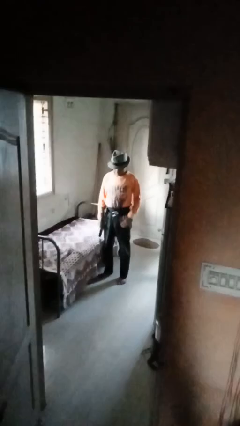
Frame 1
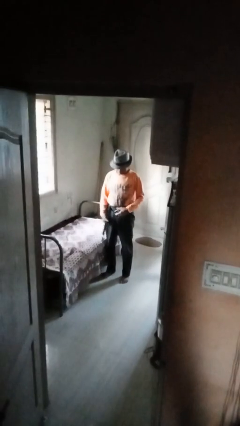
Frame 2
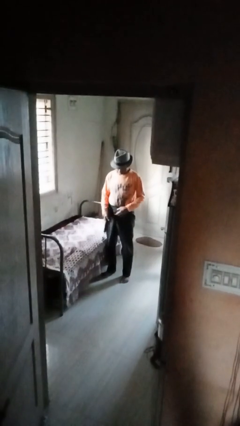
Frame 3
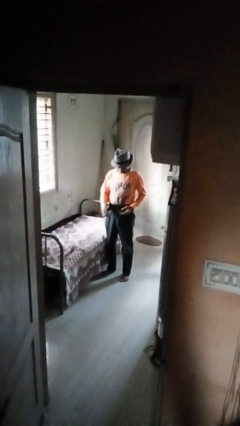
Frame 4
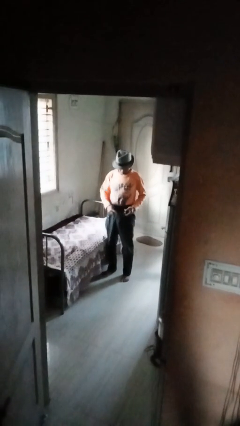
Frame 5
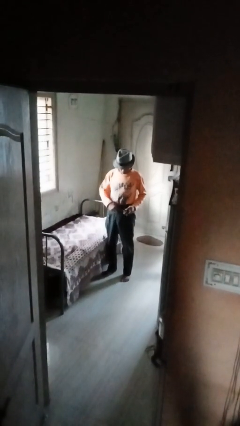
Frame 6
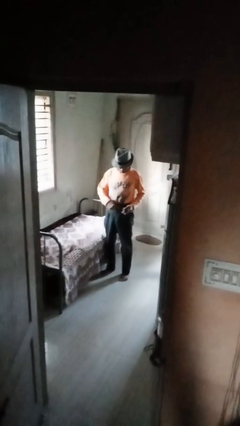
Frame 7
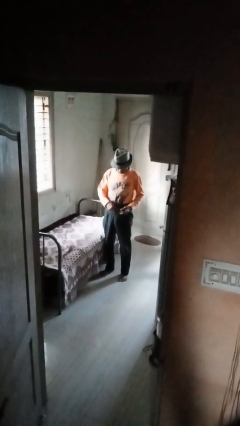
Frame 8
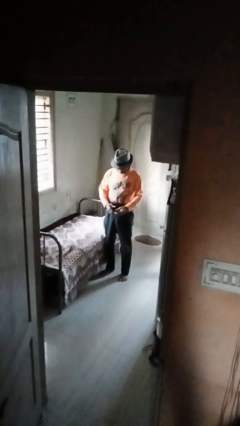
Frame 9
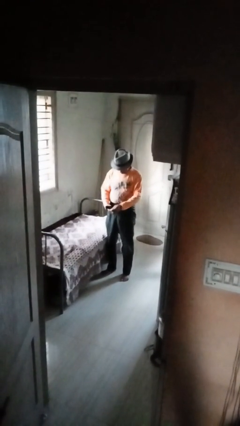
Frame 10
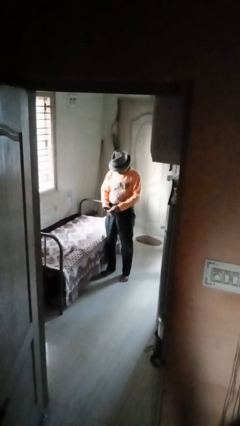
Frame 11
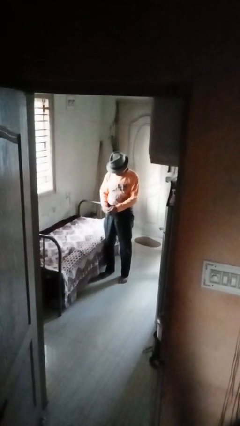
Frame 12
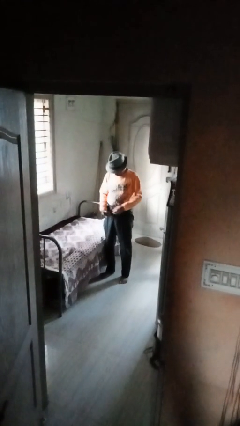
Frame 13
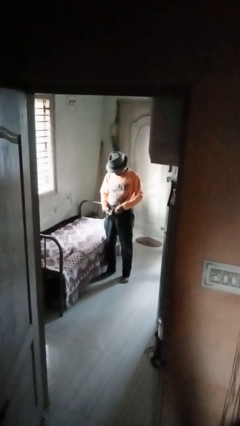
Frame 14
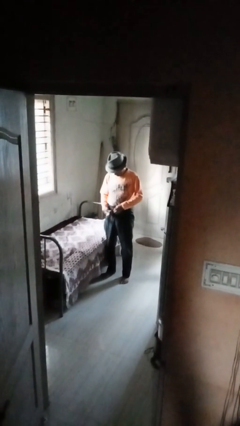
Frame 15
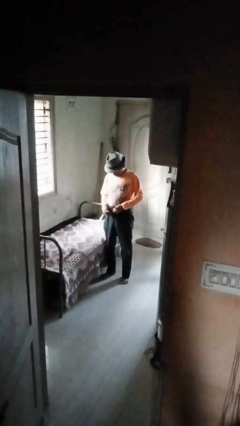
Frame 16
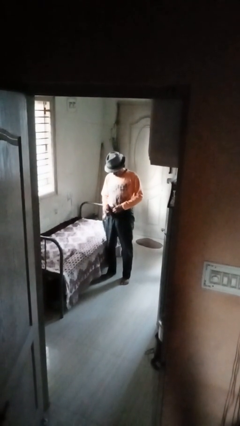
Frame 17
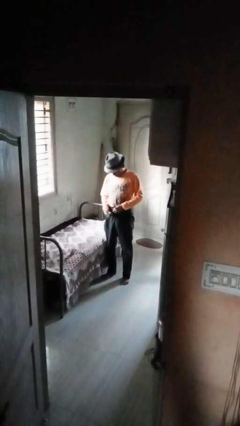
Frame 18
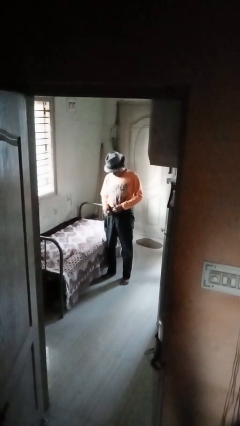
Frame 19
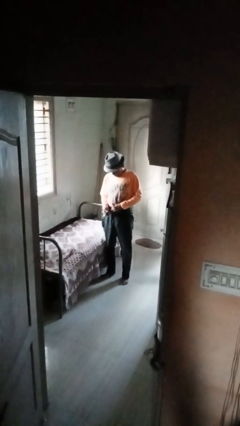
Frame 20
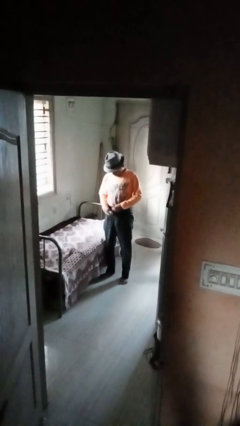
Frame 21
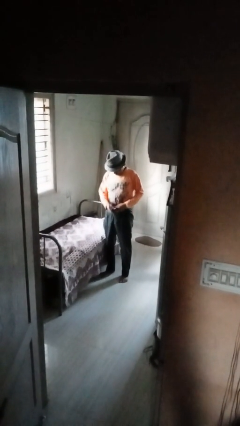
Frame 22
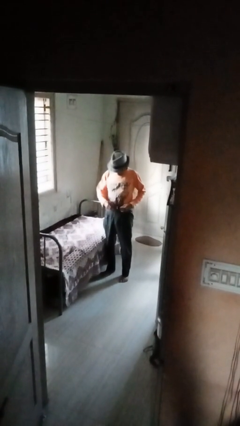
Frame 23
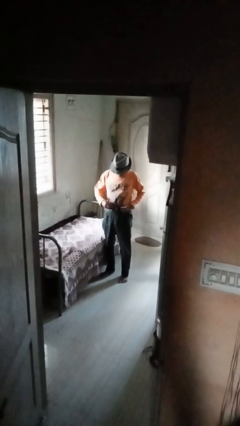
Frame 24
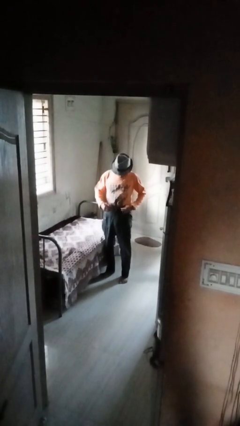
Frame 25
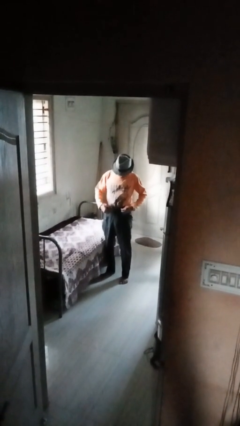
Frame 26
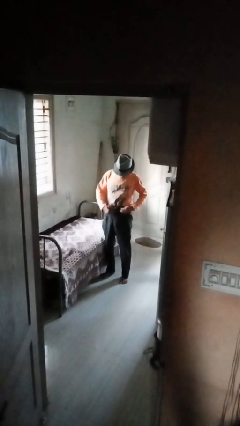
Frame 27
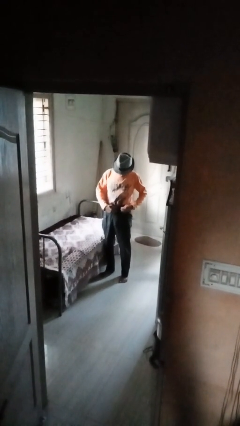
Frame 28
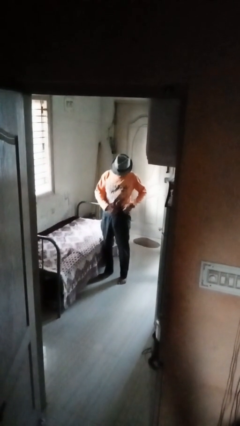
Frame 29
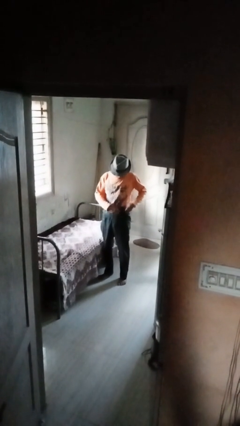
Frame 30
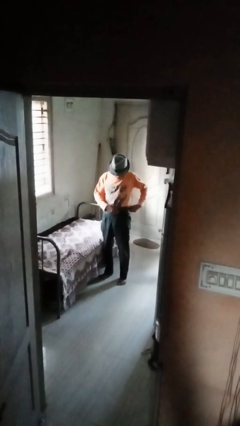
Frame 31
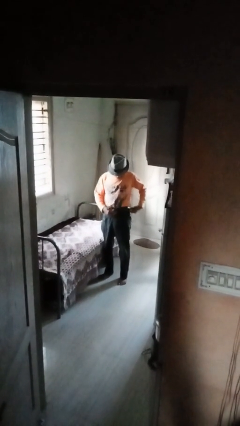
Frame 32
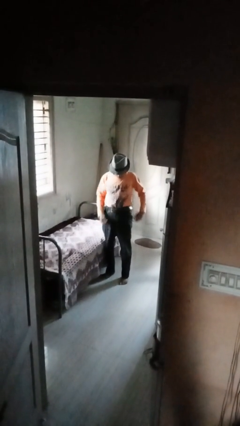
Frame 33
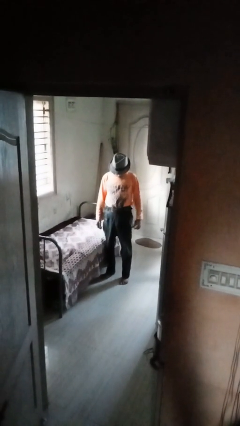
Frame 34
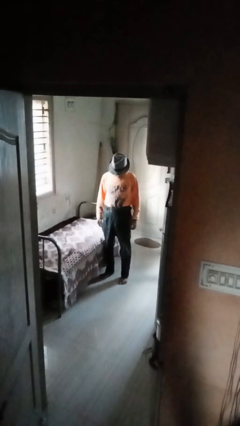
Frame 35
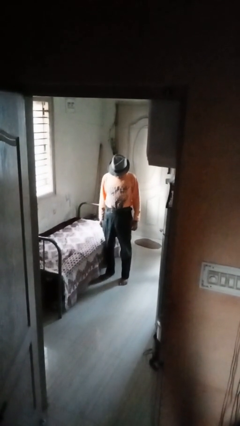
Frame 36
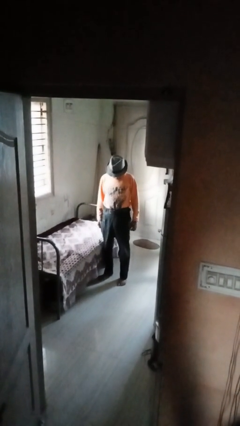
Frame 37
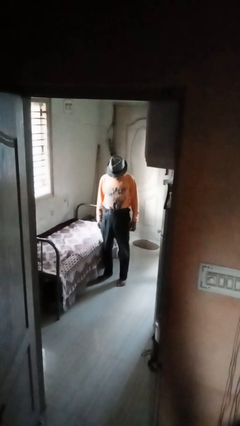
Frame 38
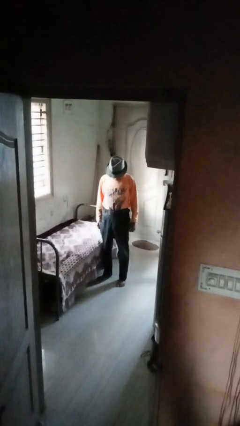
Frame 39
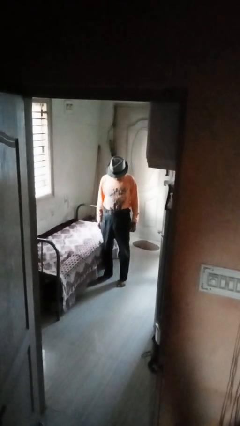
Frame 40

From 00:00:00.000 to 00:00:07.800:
person puts on belt

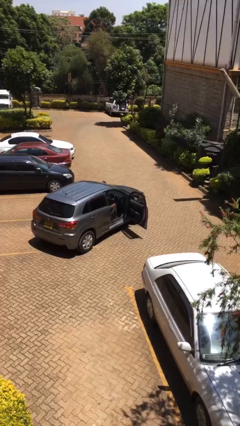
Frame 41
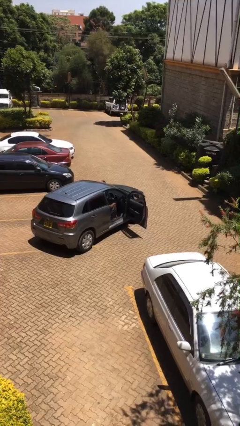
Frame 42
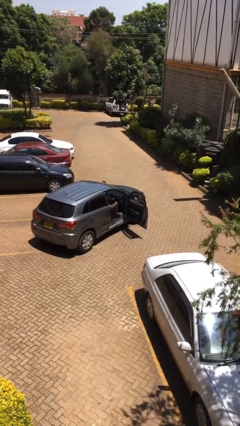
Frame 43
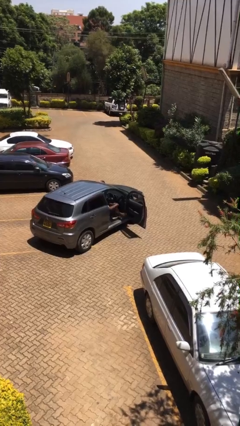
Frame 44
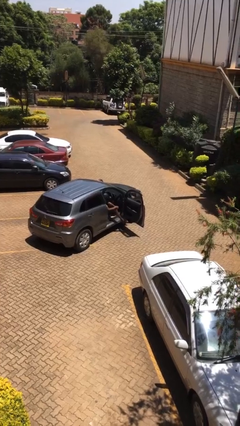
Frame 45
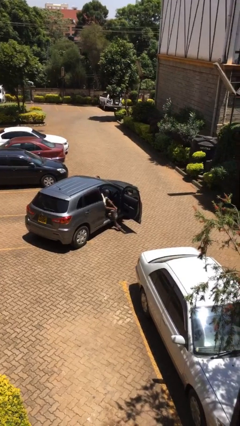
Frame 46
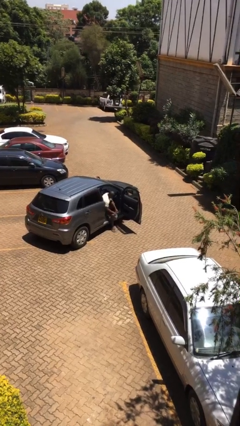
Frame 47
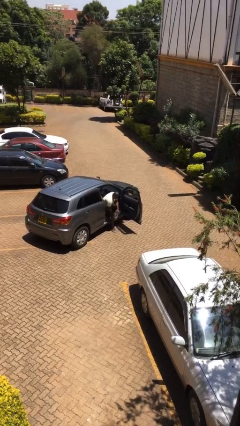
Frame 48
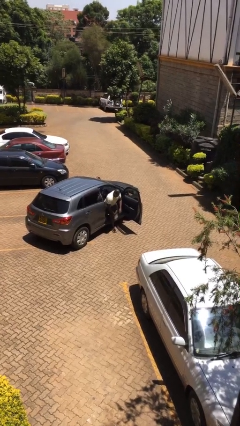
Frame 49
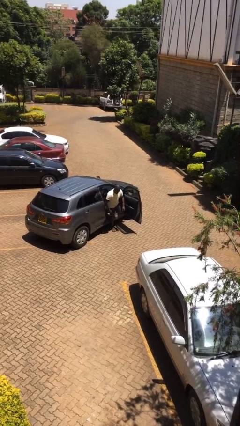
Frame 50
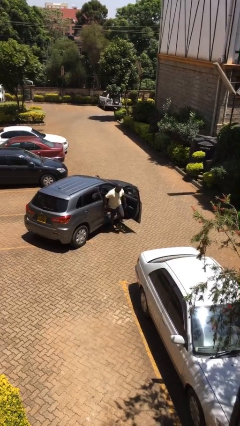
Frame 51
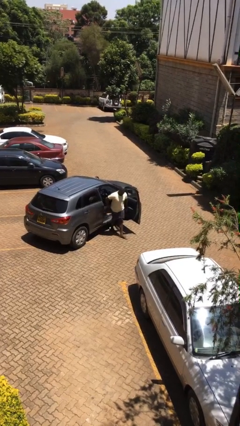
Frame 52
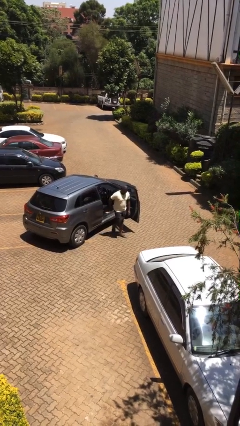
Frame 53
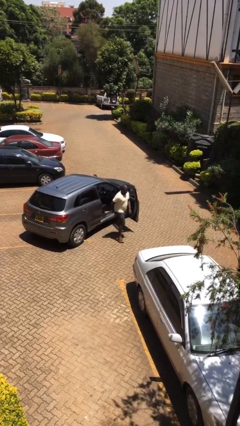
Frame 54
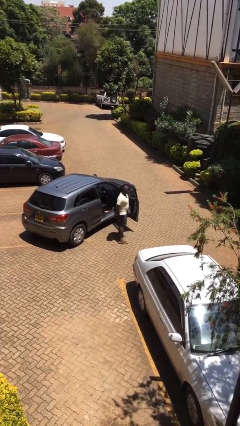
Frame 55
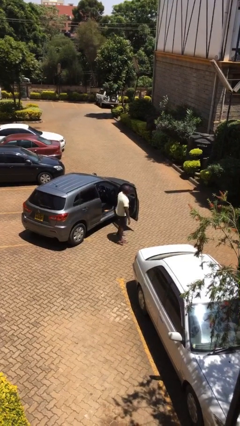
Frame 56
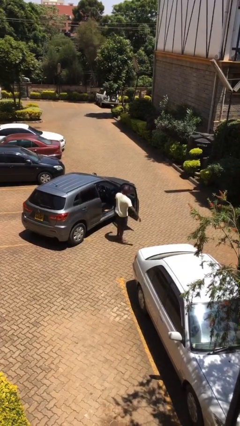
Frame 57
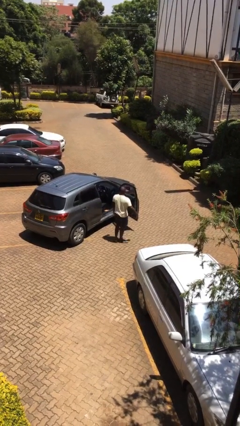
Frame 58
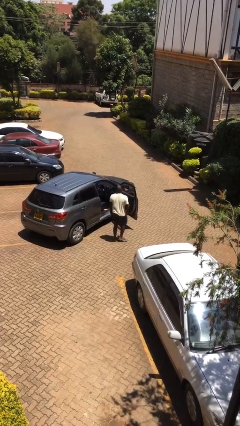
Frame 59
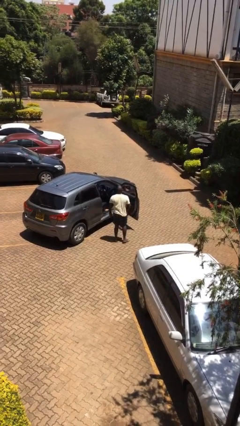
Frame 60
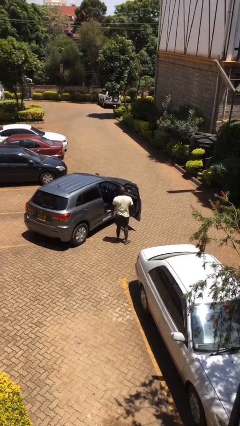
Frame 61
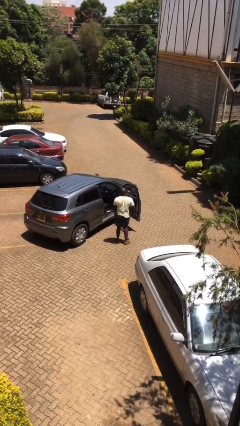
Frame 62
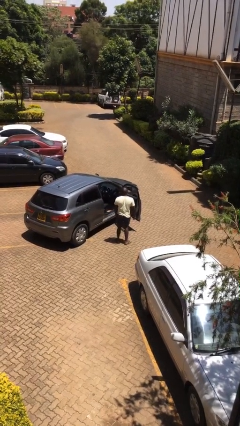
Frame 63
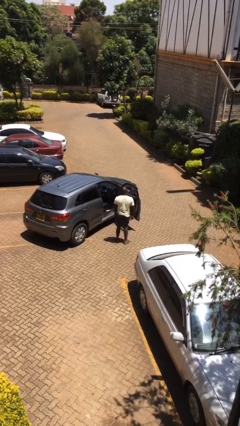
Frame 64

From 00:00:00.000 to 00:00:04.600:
person exits car

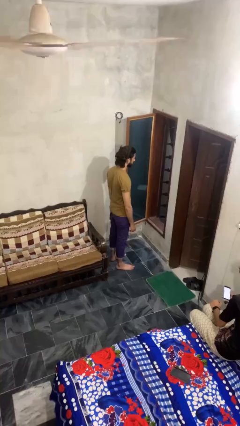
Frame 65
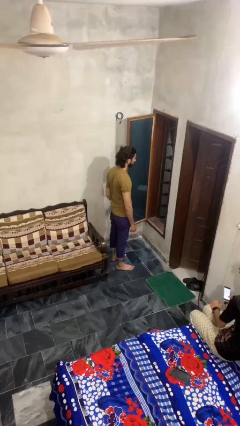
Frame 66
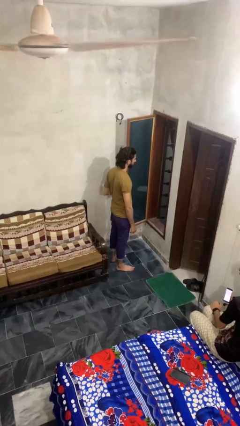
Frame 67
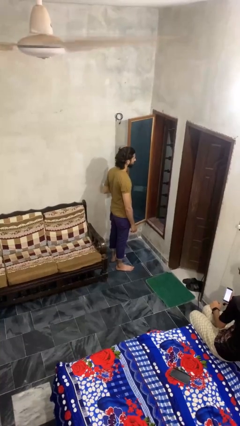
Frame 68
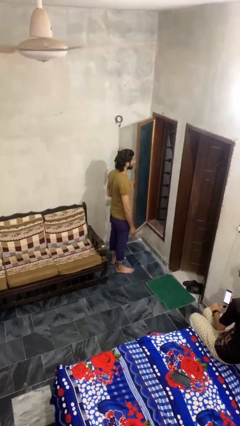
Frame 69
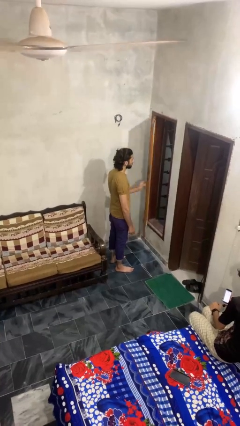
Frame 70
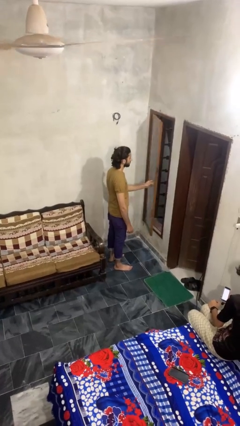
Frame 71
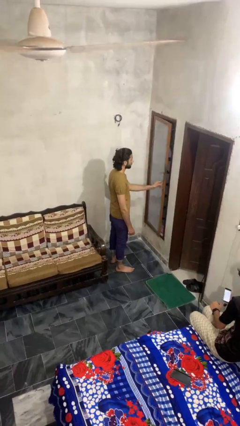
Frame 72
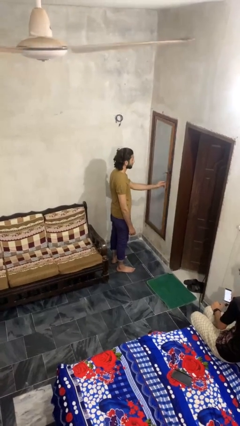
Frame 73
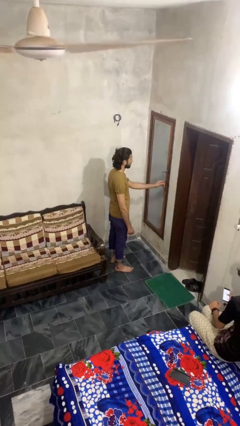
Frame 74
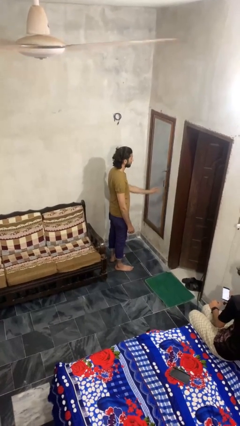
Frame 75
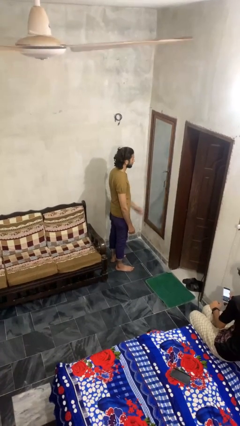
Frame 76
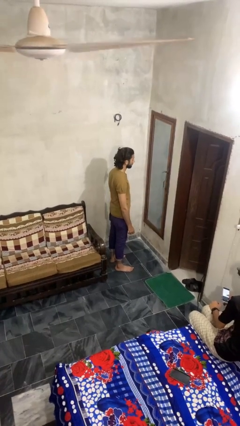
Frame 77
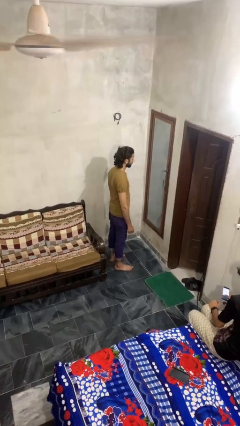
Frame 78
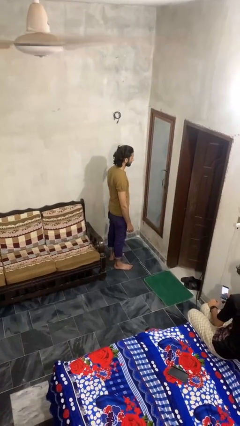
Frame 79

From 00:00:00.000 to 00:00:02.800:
person closes home window

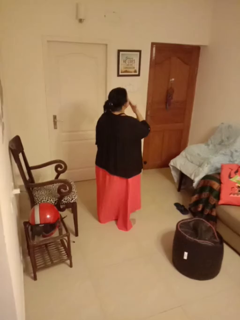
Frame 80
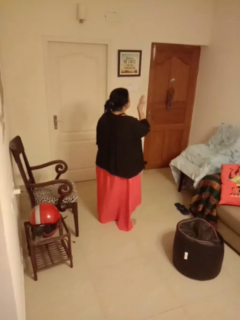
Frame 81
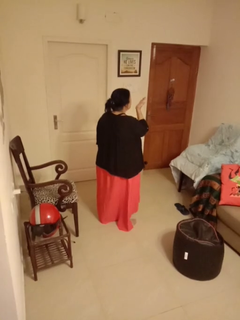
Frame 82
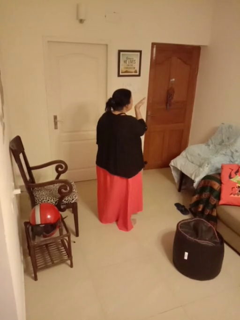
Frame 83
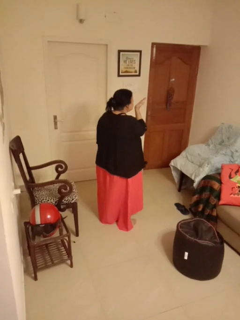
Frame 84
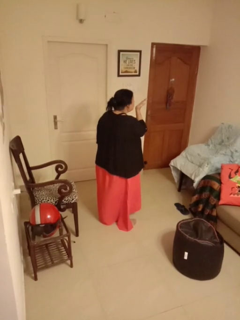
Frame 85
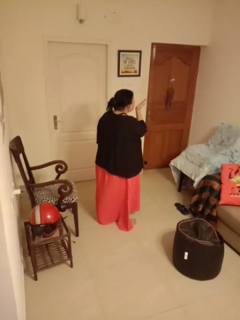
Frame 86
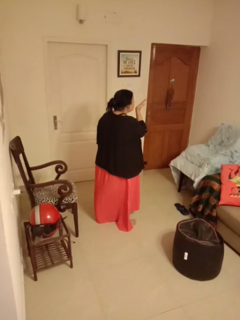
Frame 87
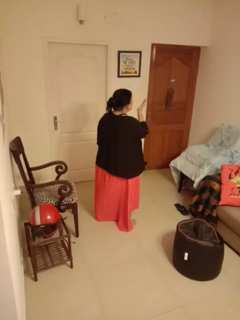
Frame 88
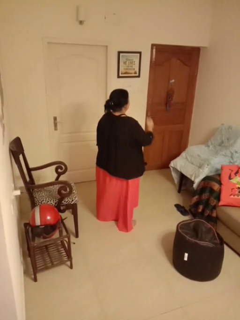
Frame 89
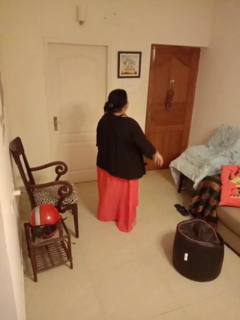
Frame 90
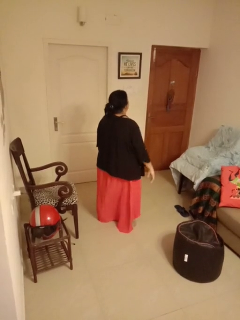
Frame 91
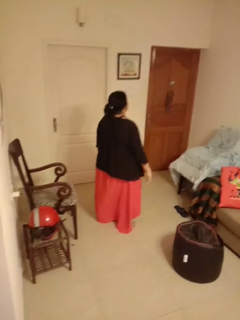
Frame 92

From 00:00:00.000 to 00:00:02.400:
person gestures blow kiss

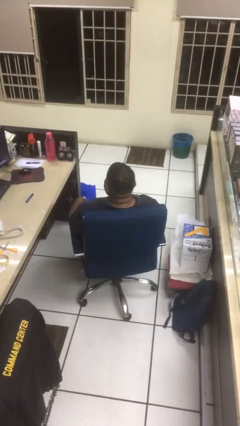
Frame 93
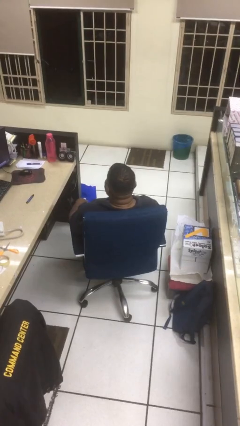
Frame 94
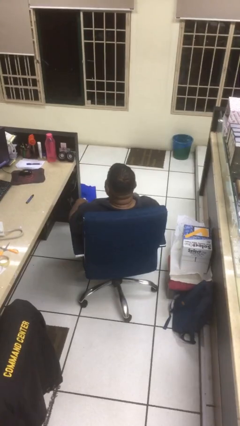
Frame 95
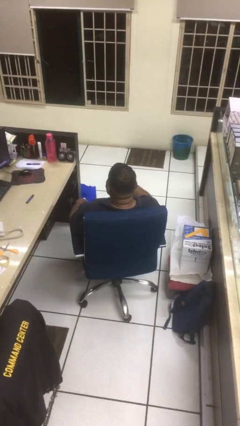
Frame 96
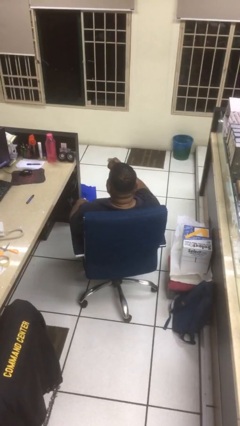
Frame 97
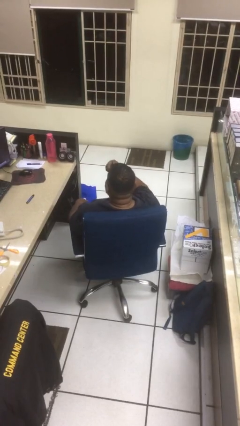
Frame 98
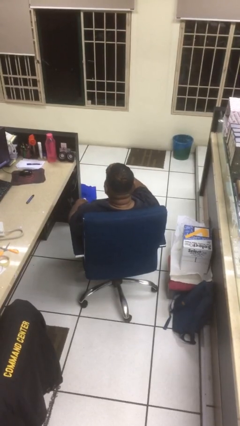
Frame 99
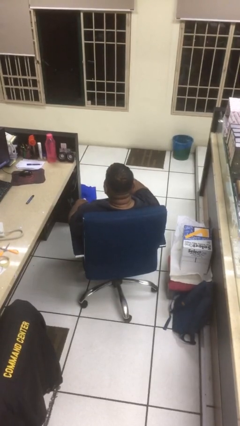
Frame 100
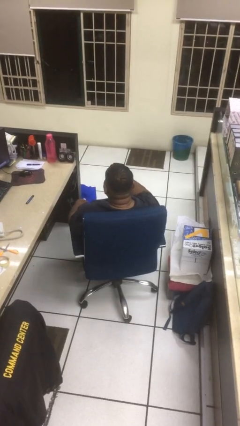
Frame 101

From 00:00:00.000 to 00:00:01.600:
person gestures watch closely
